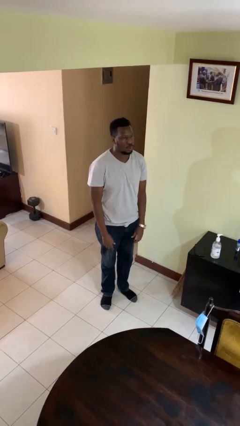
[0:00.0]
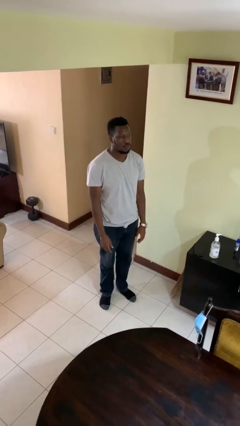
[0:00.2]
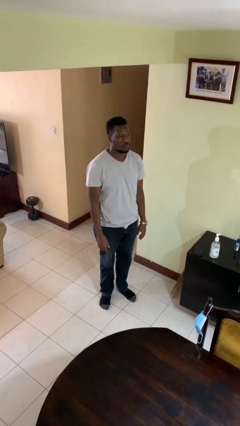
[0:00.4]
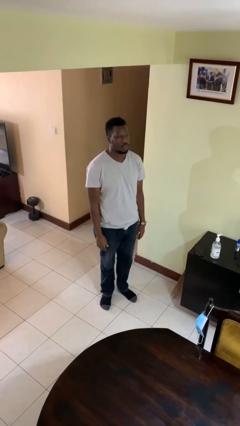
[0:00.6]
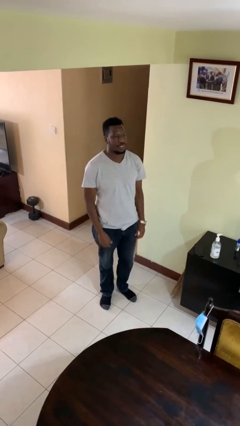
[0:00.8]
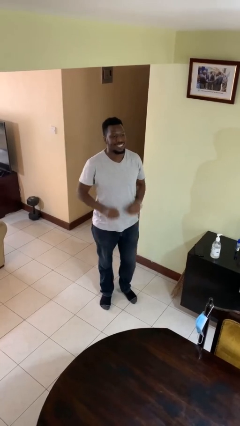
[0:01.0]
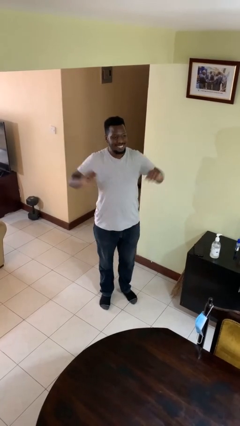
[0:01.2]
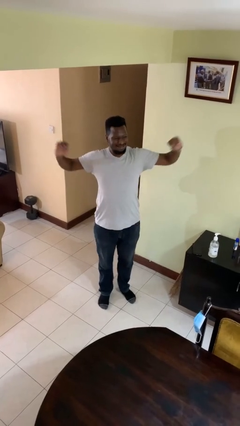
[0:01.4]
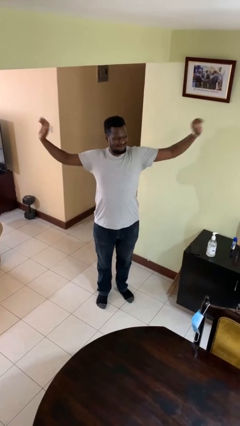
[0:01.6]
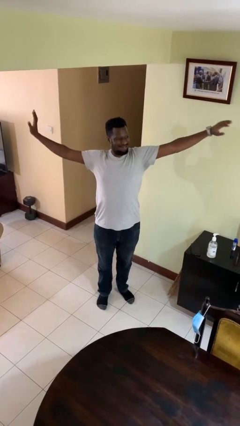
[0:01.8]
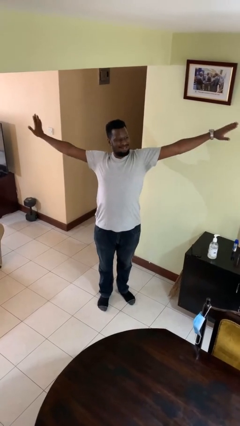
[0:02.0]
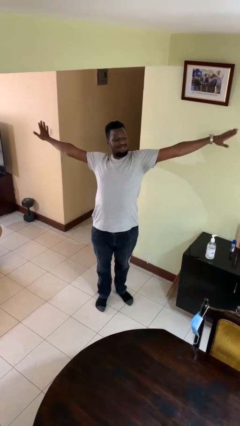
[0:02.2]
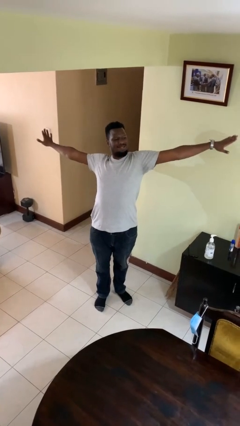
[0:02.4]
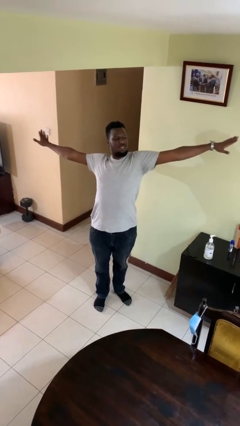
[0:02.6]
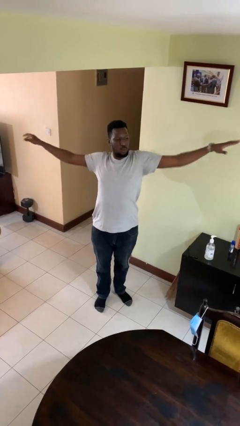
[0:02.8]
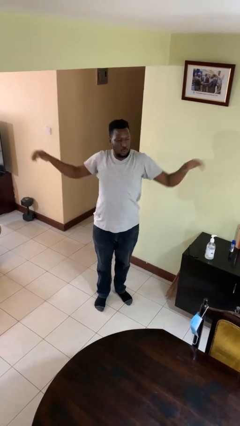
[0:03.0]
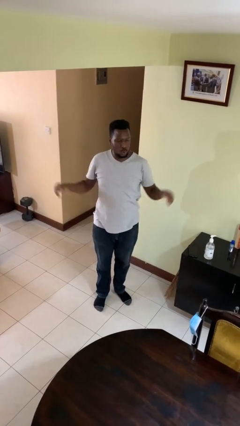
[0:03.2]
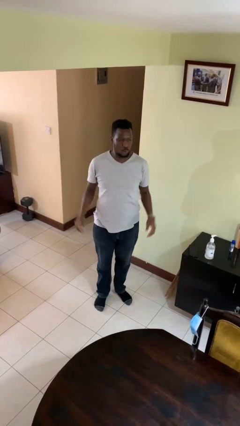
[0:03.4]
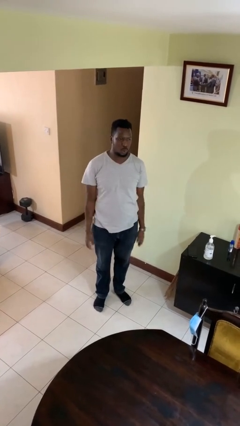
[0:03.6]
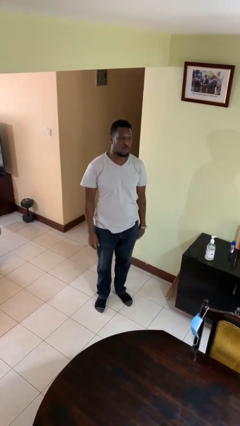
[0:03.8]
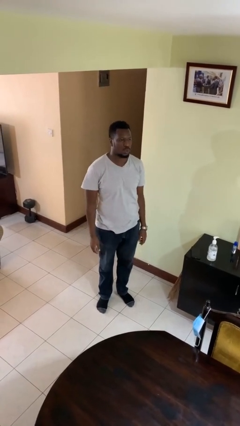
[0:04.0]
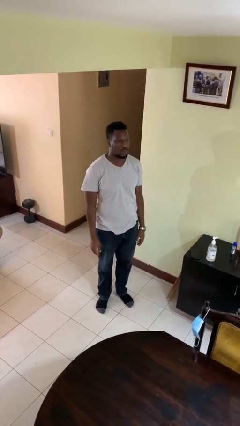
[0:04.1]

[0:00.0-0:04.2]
person stretches arms to side

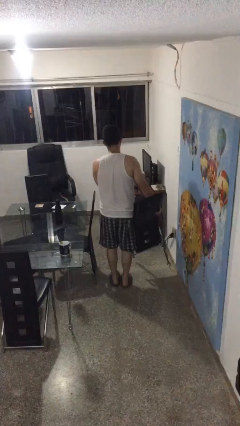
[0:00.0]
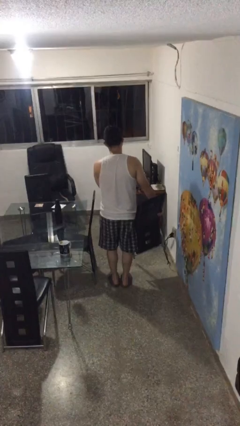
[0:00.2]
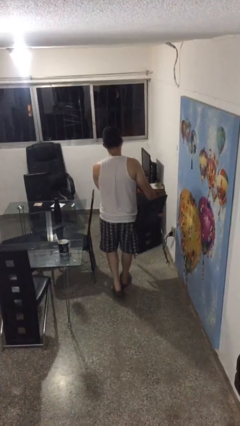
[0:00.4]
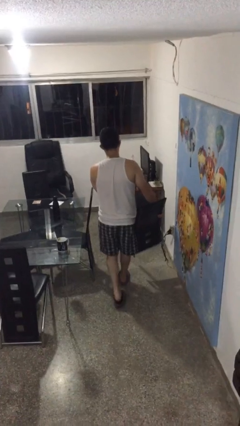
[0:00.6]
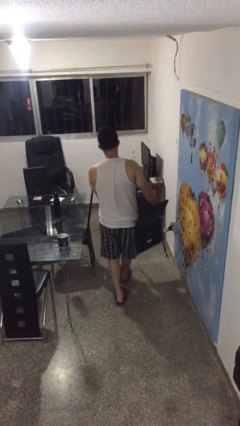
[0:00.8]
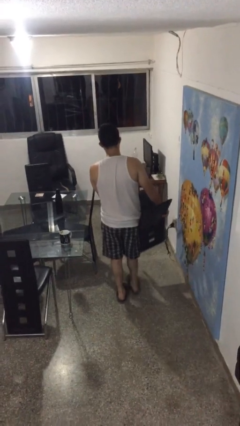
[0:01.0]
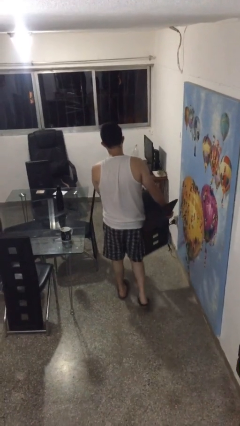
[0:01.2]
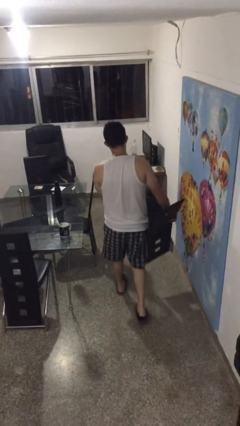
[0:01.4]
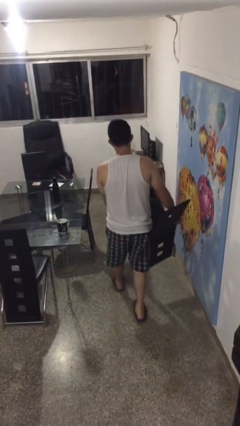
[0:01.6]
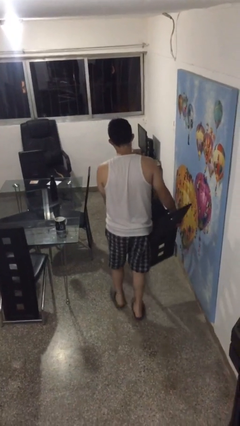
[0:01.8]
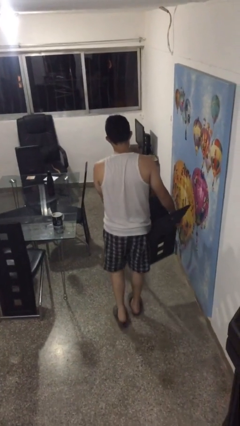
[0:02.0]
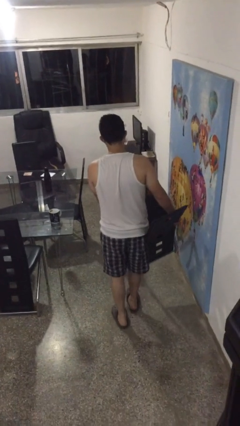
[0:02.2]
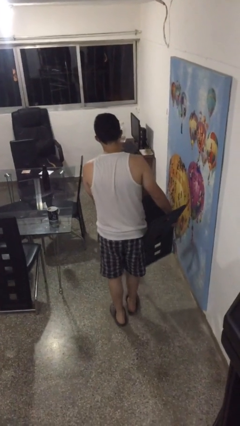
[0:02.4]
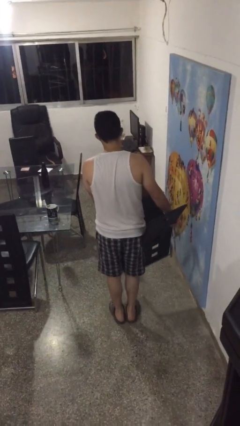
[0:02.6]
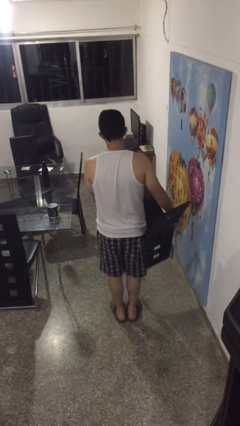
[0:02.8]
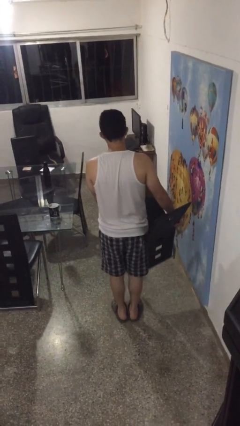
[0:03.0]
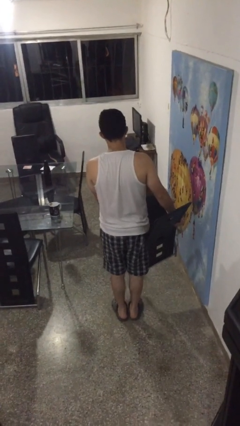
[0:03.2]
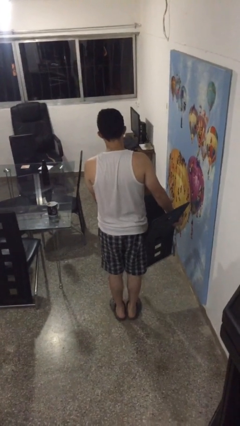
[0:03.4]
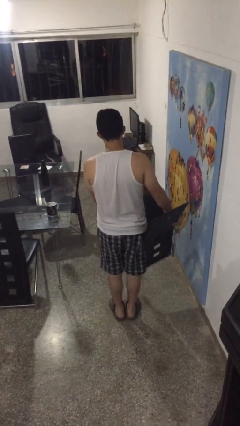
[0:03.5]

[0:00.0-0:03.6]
person carries furniture

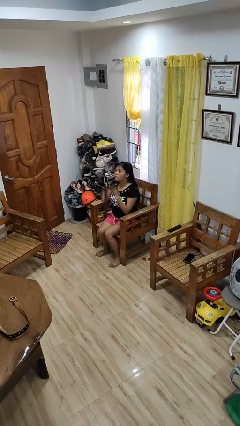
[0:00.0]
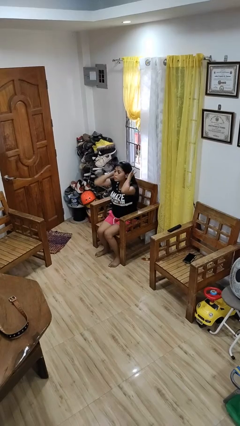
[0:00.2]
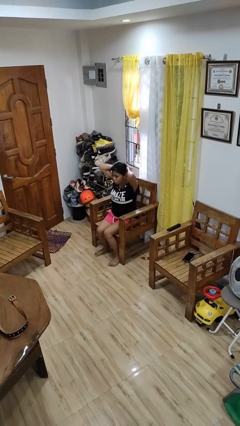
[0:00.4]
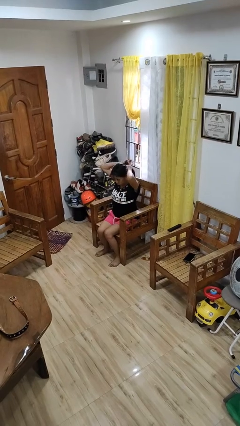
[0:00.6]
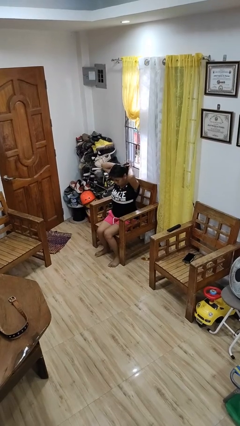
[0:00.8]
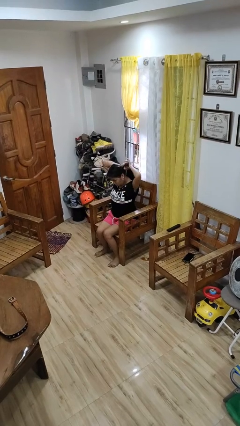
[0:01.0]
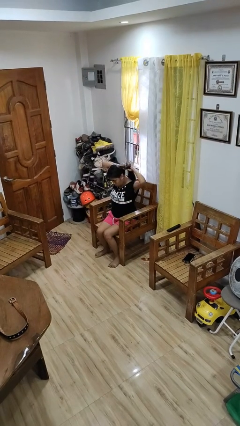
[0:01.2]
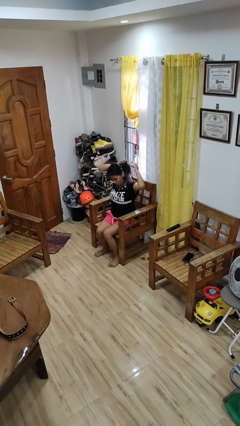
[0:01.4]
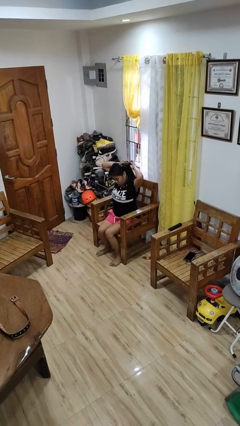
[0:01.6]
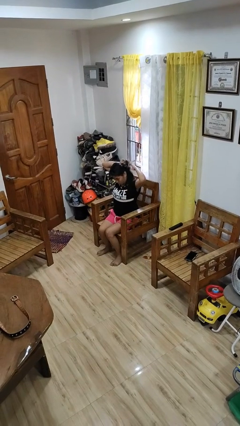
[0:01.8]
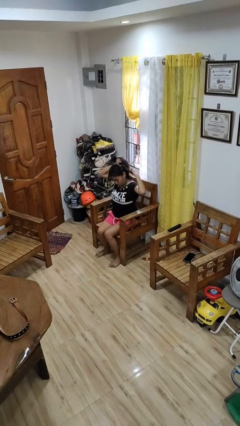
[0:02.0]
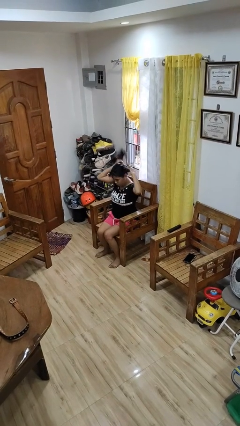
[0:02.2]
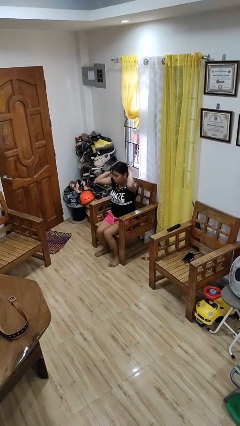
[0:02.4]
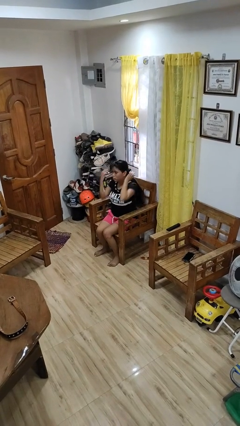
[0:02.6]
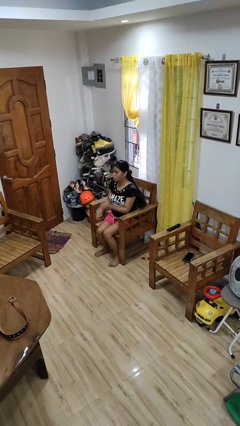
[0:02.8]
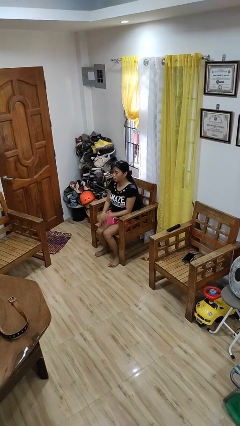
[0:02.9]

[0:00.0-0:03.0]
person puts hair in ponytail

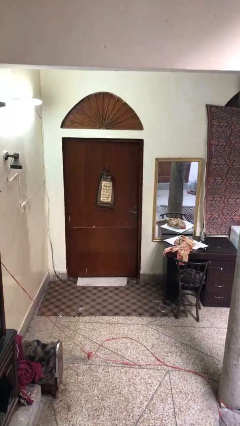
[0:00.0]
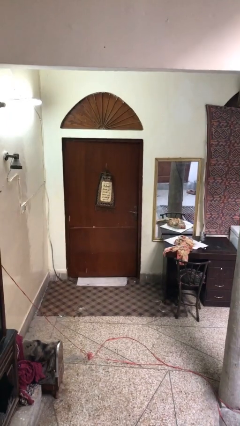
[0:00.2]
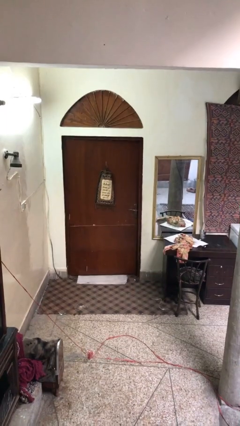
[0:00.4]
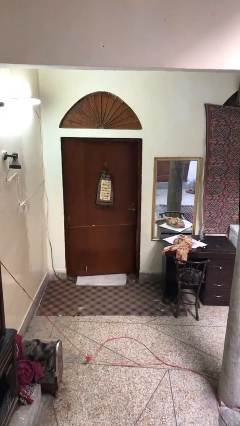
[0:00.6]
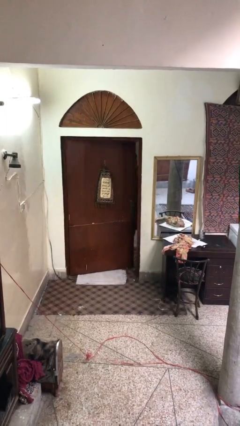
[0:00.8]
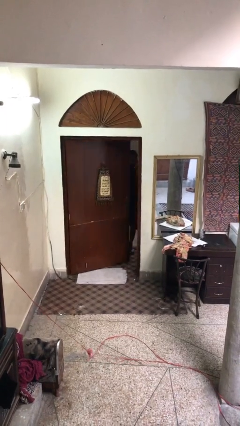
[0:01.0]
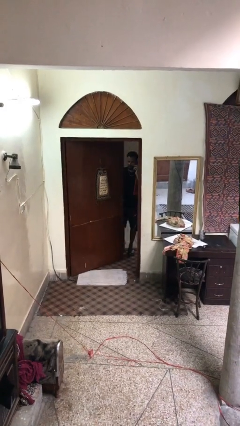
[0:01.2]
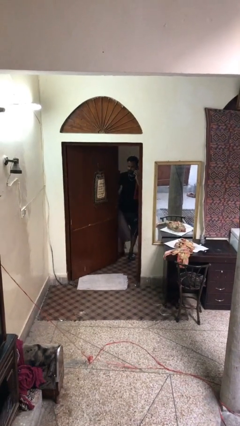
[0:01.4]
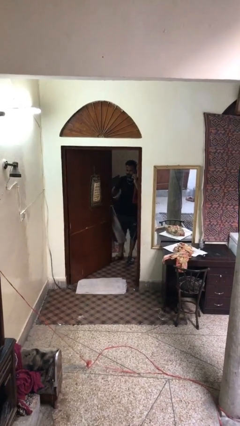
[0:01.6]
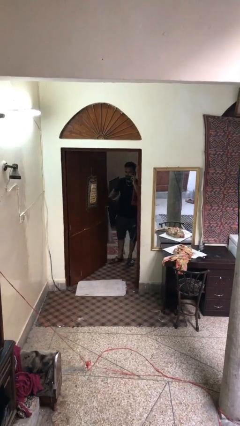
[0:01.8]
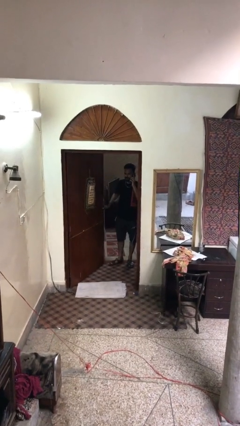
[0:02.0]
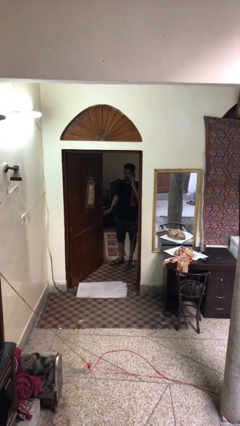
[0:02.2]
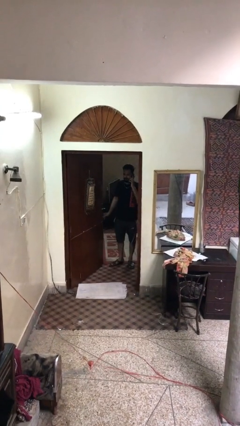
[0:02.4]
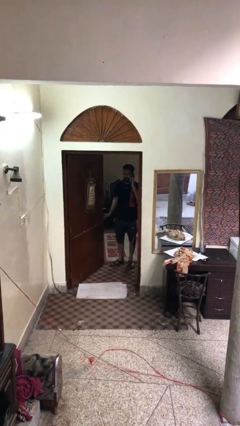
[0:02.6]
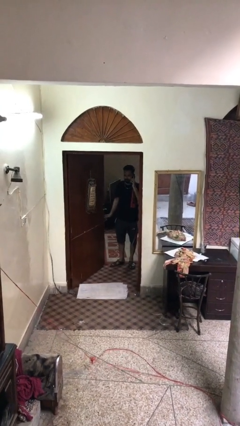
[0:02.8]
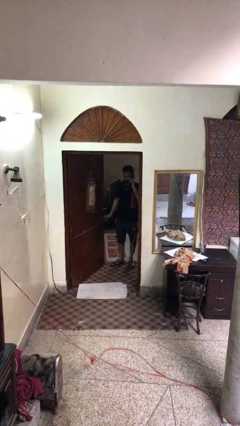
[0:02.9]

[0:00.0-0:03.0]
person opens facility door

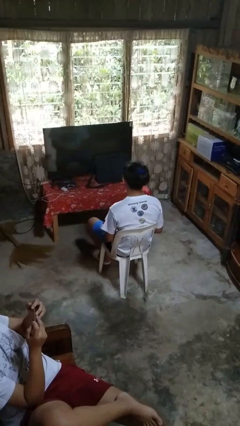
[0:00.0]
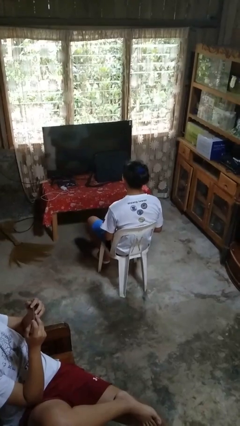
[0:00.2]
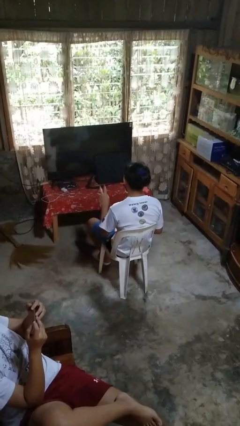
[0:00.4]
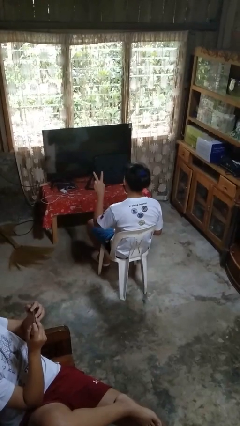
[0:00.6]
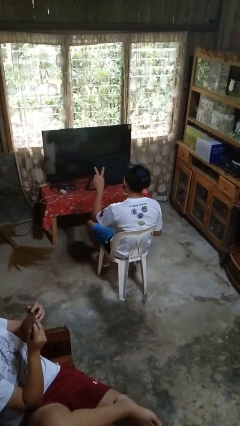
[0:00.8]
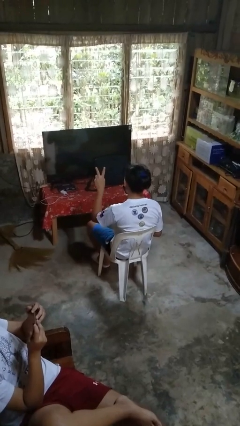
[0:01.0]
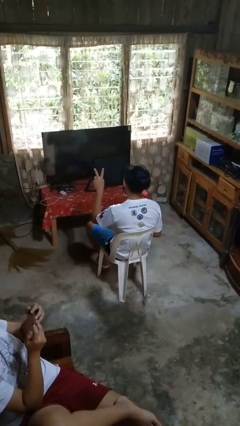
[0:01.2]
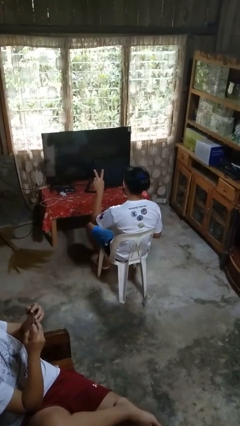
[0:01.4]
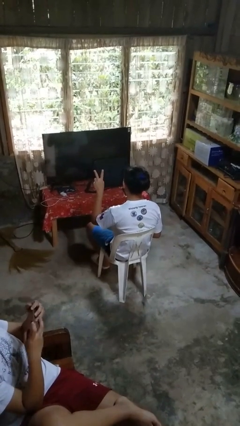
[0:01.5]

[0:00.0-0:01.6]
person gestures peace

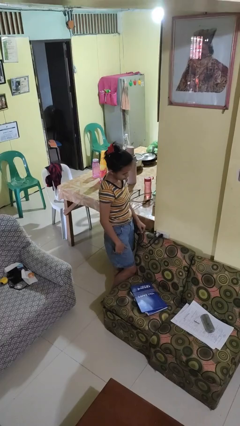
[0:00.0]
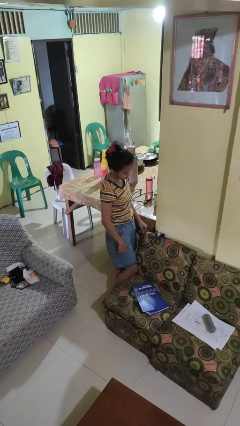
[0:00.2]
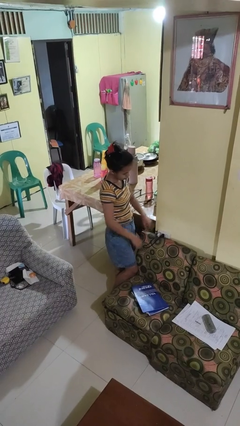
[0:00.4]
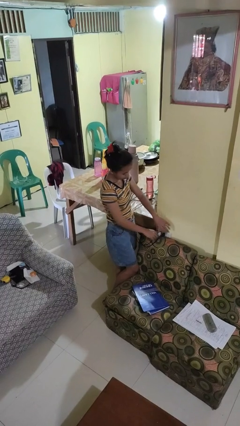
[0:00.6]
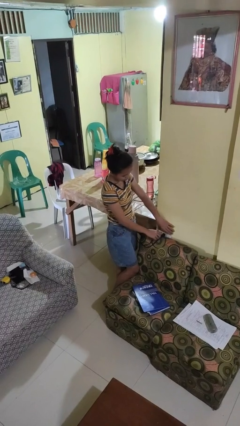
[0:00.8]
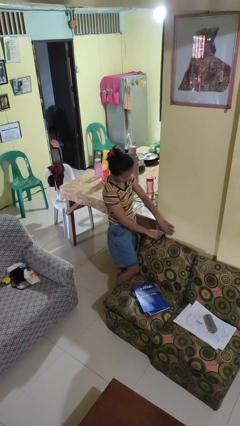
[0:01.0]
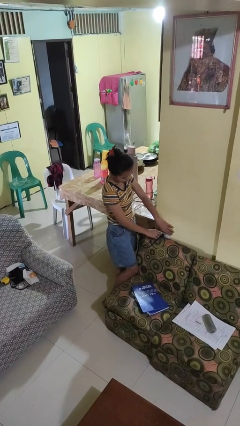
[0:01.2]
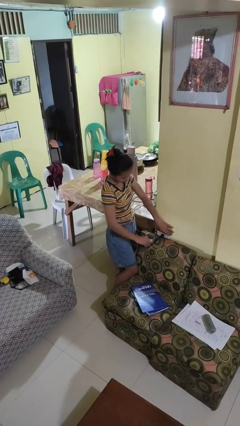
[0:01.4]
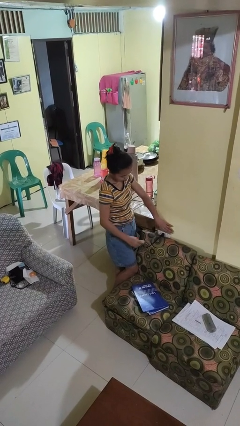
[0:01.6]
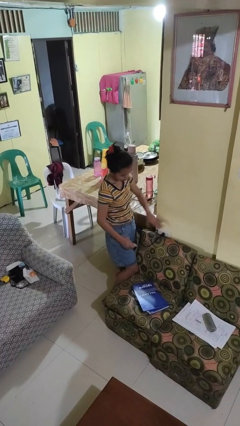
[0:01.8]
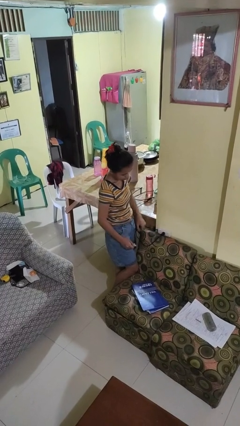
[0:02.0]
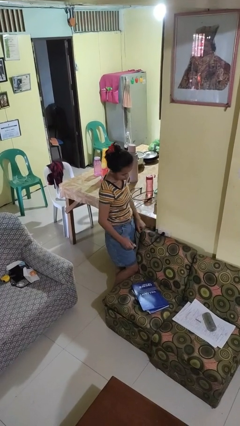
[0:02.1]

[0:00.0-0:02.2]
person unplugs from electrical socket
